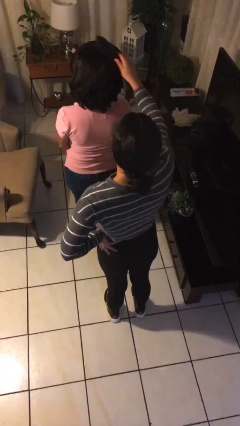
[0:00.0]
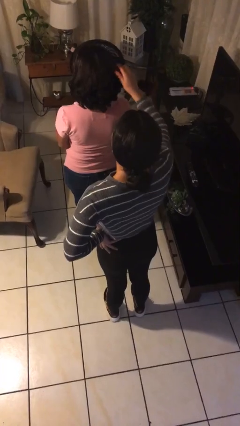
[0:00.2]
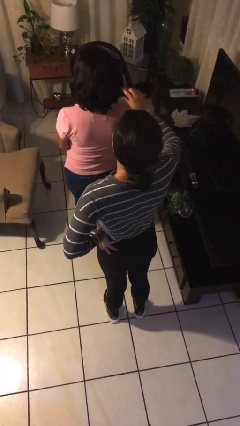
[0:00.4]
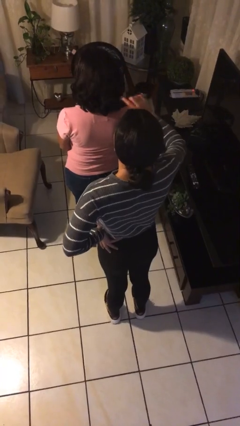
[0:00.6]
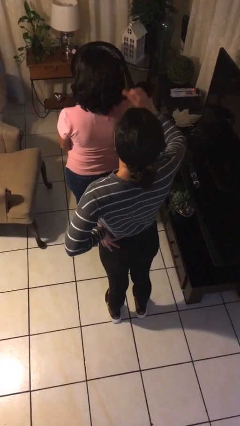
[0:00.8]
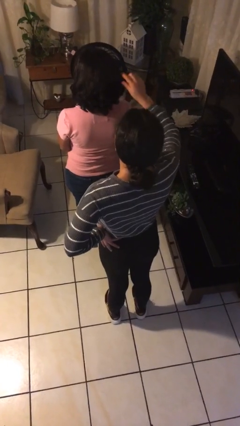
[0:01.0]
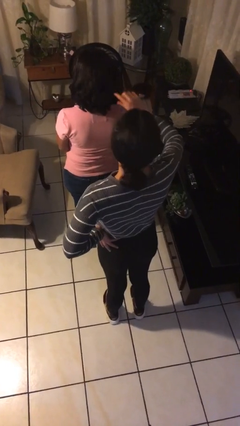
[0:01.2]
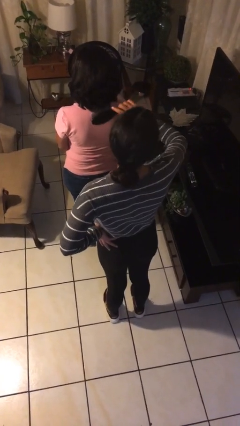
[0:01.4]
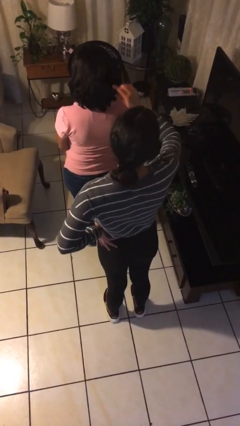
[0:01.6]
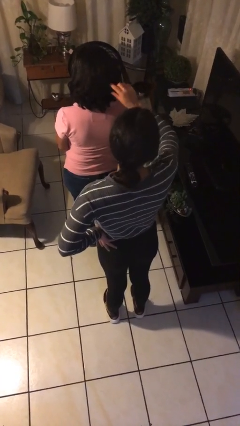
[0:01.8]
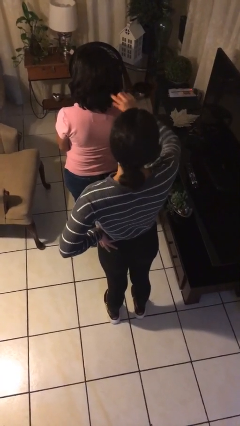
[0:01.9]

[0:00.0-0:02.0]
person brushes hair of person

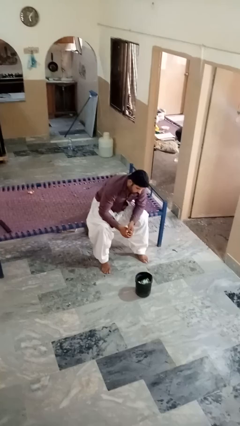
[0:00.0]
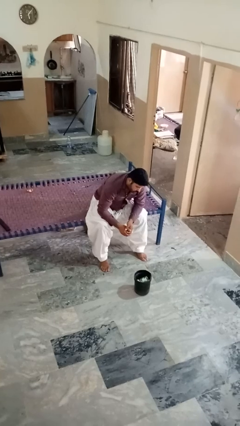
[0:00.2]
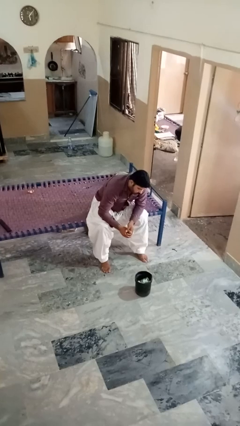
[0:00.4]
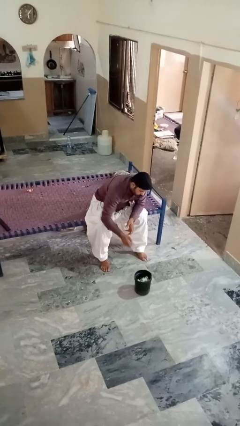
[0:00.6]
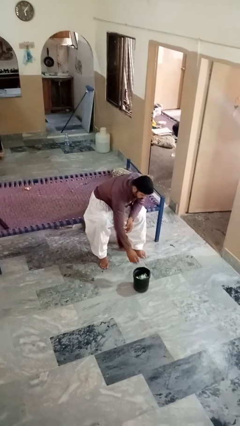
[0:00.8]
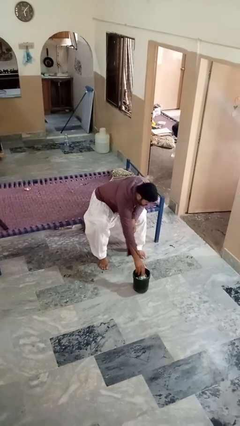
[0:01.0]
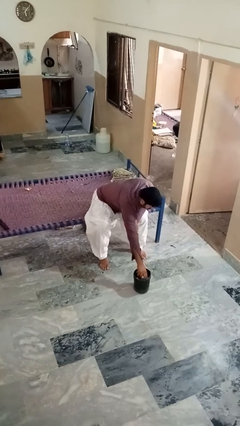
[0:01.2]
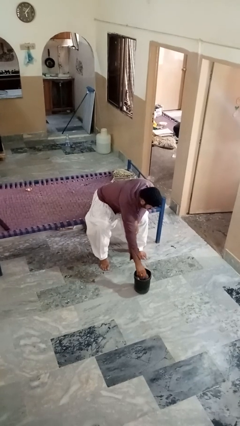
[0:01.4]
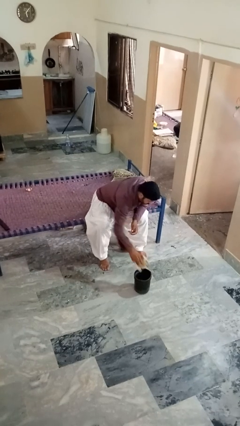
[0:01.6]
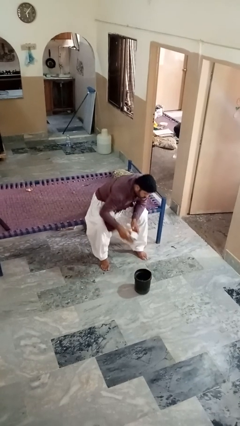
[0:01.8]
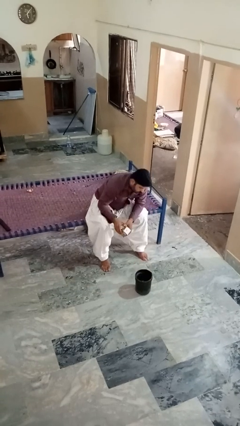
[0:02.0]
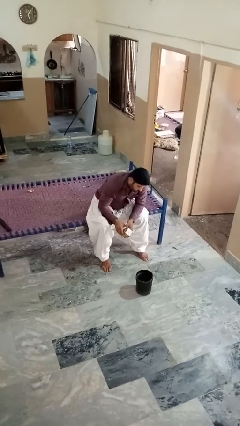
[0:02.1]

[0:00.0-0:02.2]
person takes object from basket

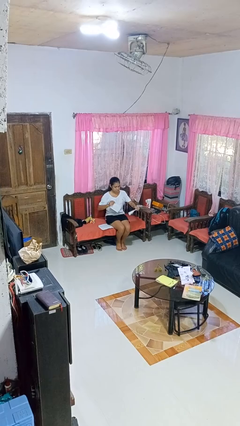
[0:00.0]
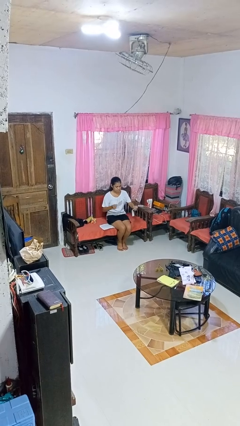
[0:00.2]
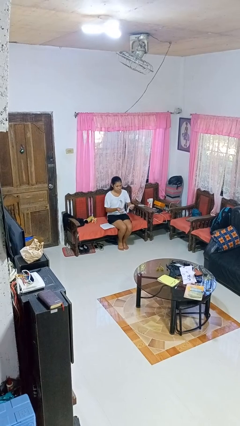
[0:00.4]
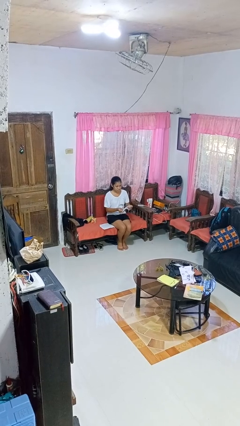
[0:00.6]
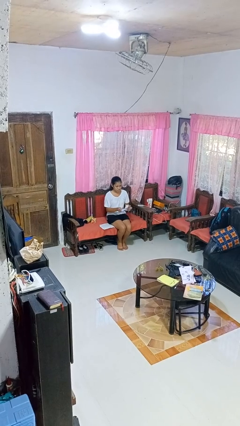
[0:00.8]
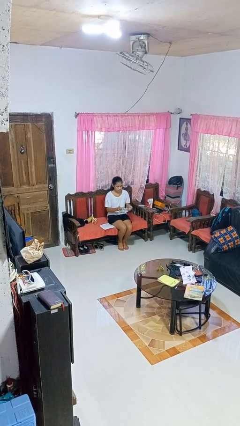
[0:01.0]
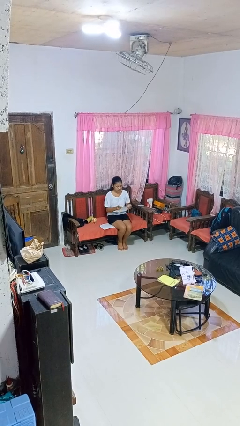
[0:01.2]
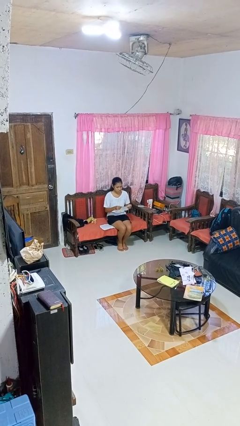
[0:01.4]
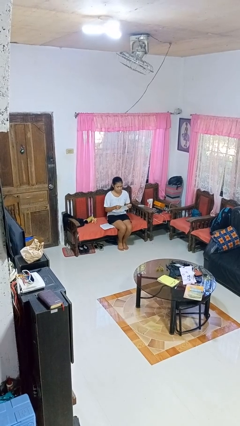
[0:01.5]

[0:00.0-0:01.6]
person tears paper

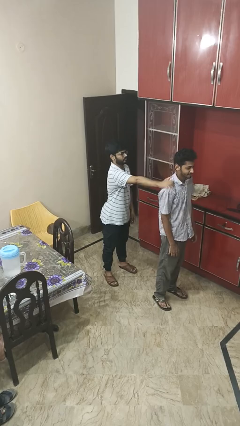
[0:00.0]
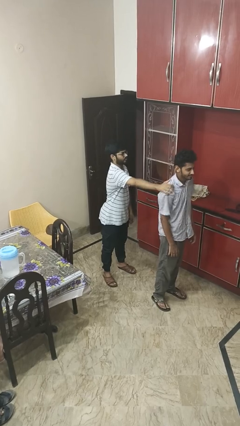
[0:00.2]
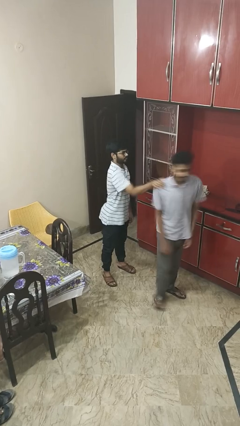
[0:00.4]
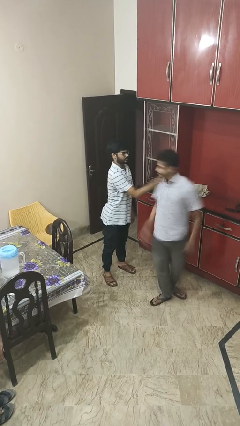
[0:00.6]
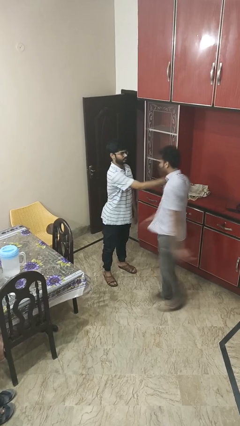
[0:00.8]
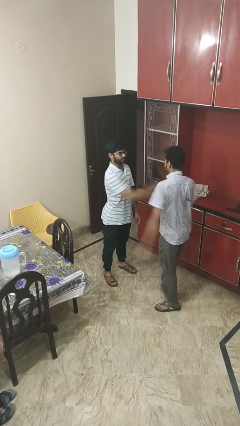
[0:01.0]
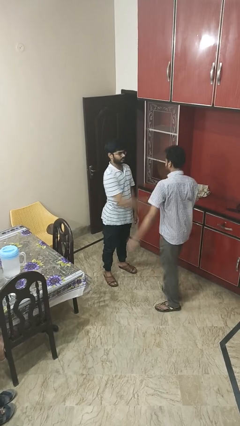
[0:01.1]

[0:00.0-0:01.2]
person spins person around

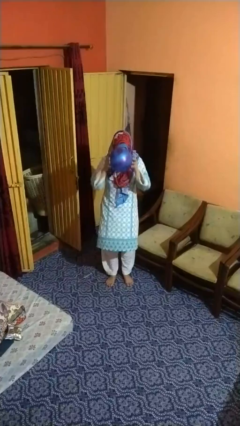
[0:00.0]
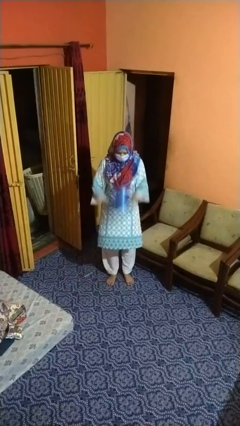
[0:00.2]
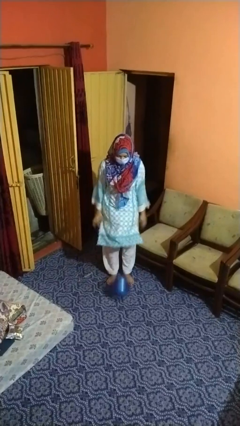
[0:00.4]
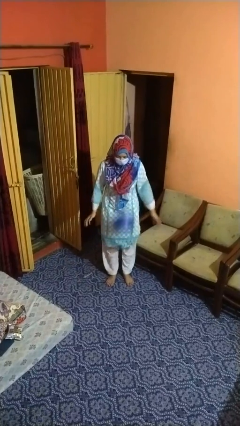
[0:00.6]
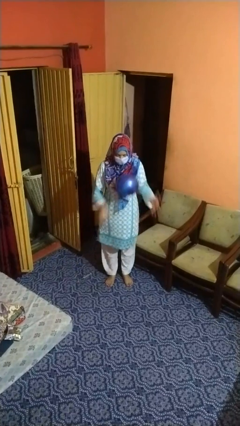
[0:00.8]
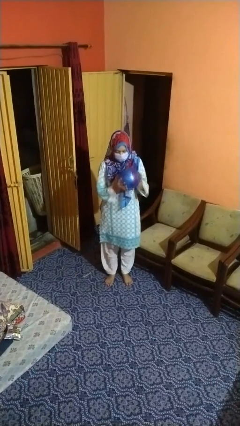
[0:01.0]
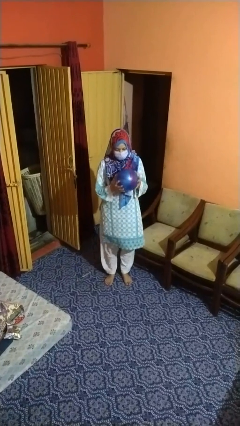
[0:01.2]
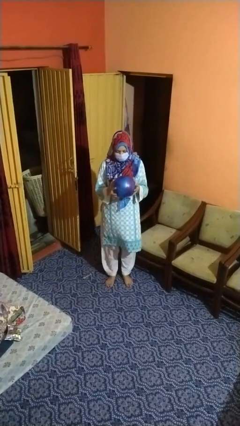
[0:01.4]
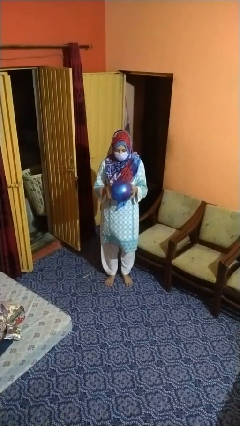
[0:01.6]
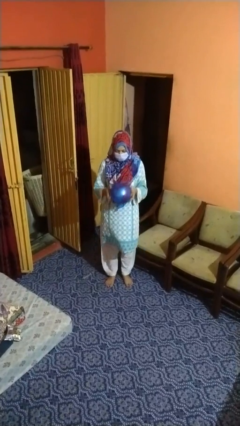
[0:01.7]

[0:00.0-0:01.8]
person bounces ball on floor

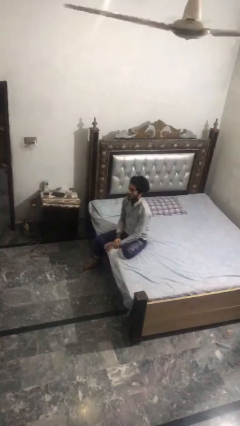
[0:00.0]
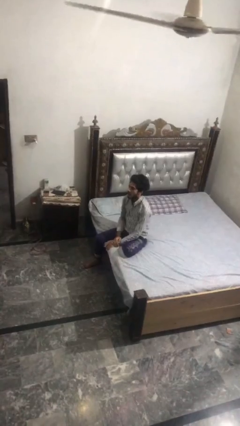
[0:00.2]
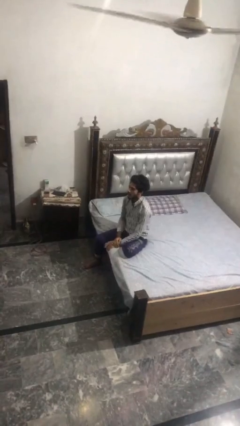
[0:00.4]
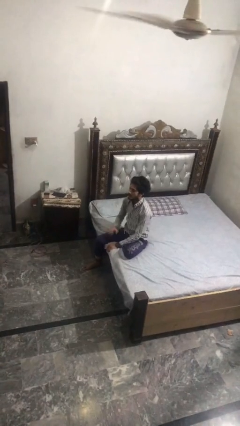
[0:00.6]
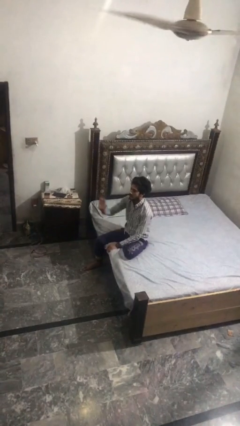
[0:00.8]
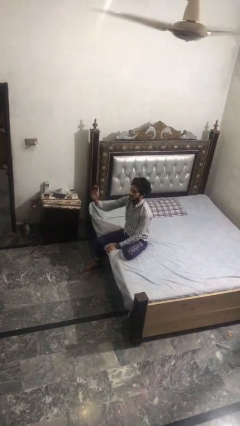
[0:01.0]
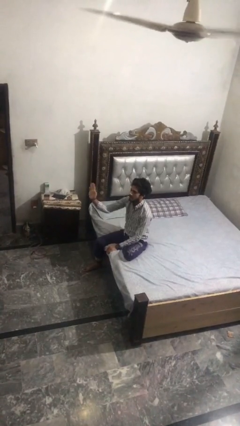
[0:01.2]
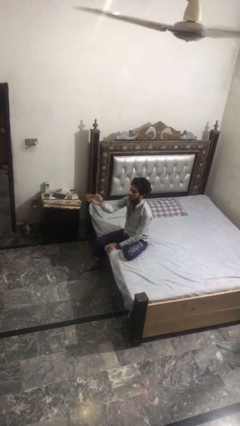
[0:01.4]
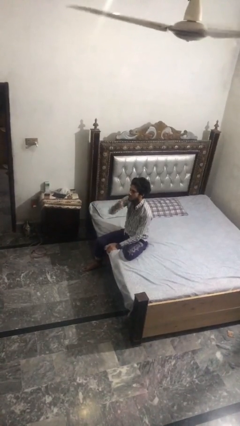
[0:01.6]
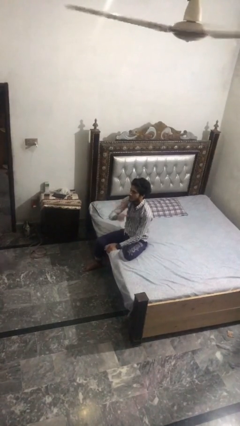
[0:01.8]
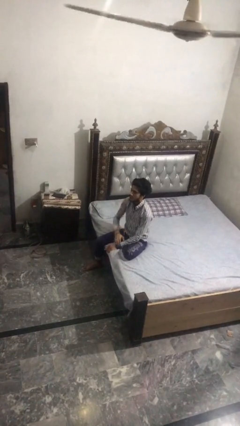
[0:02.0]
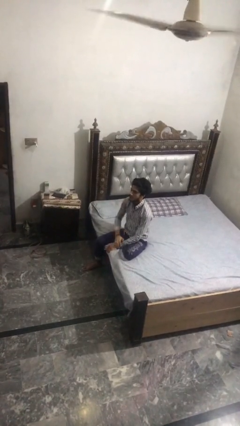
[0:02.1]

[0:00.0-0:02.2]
person gestures swipe left

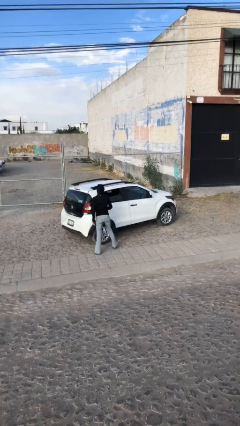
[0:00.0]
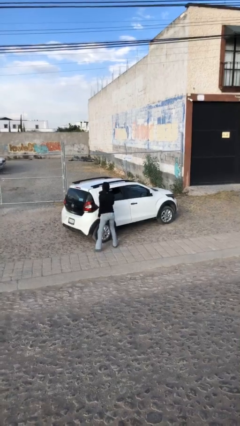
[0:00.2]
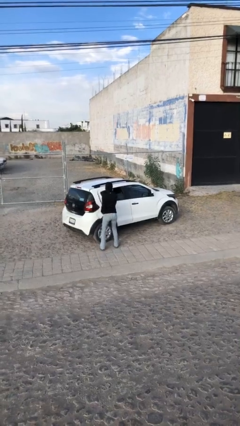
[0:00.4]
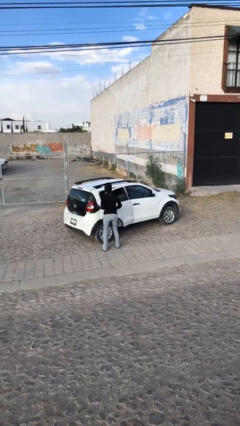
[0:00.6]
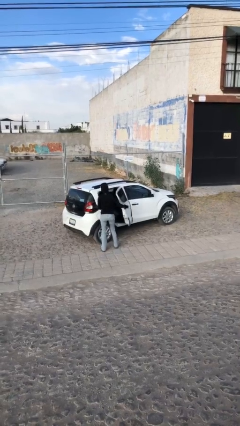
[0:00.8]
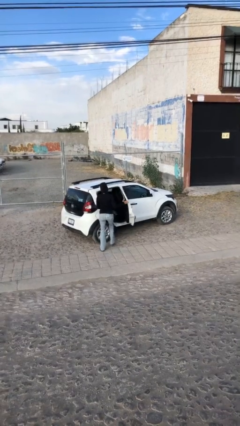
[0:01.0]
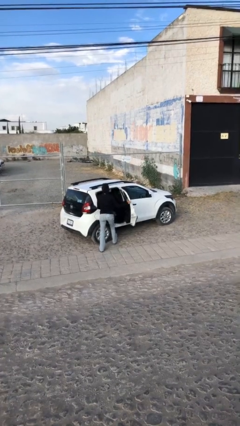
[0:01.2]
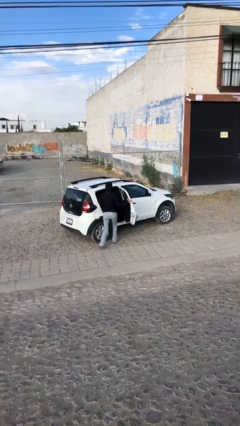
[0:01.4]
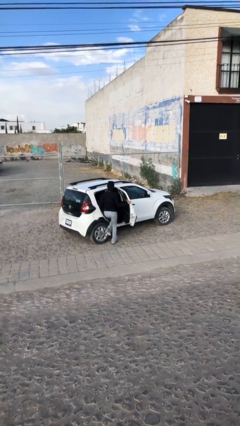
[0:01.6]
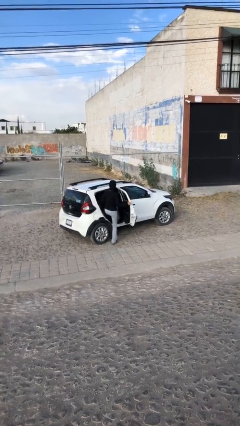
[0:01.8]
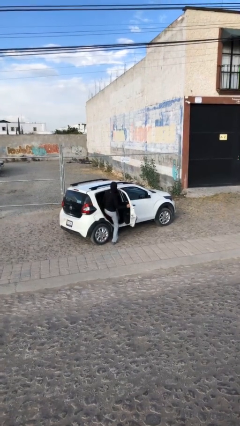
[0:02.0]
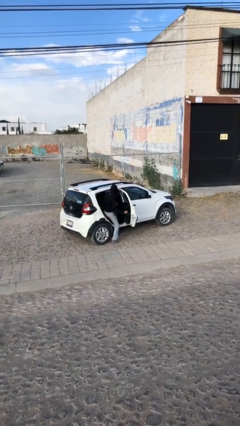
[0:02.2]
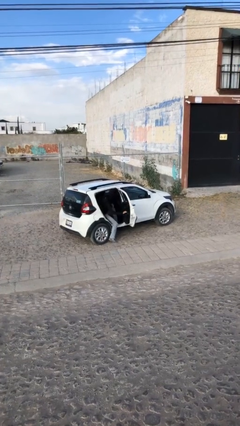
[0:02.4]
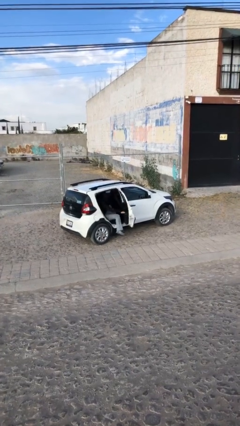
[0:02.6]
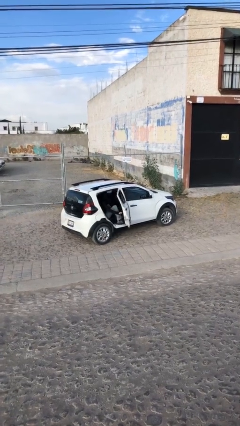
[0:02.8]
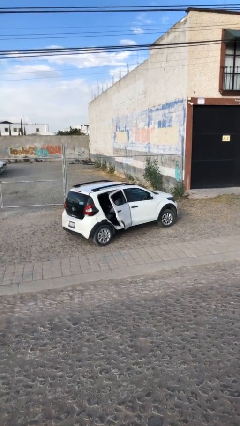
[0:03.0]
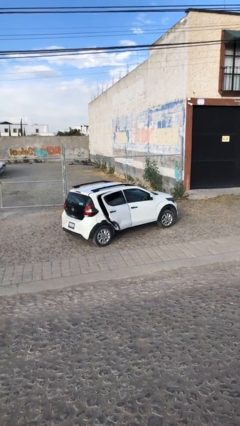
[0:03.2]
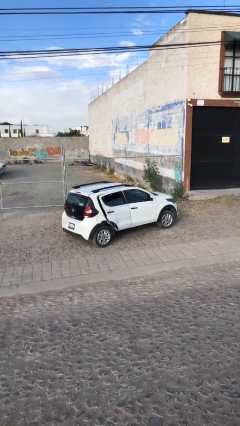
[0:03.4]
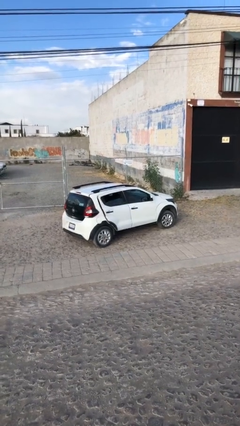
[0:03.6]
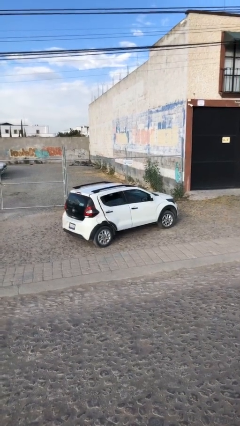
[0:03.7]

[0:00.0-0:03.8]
car picks up person

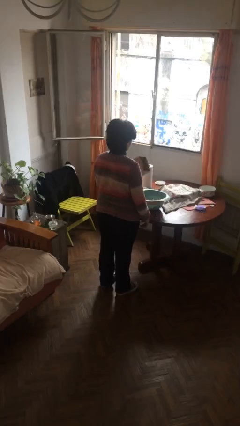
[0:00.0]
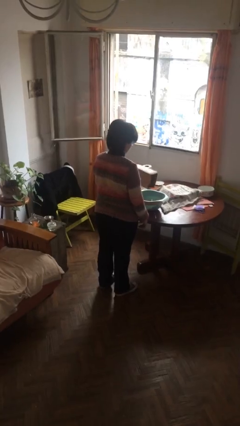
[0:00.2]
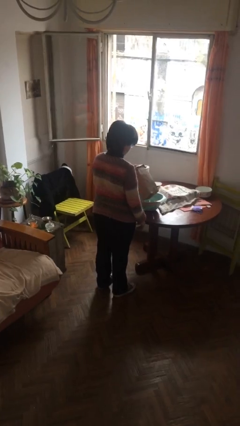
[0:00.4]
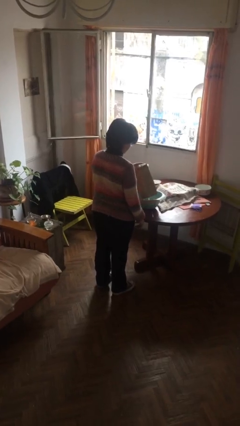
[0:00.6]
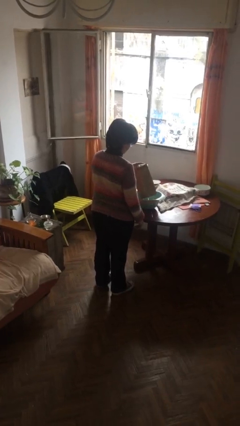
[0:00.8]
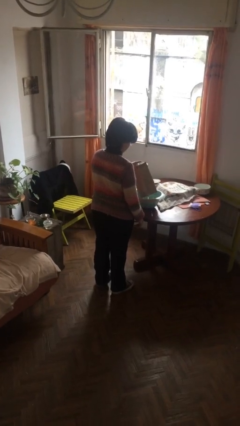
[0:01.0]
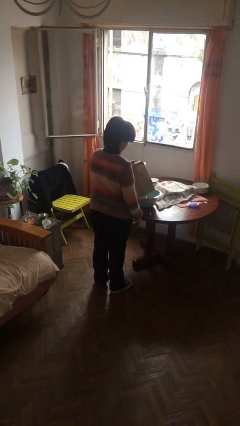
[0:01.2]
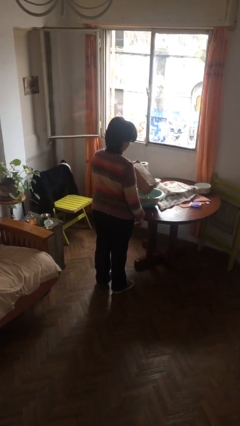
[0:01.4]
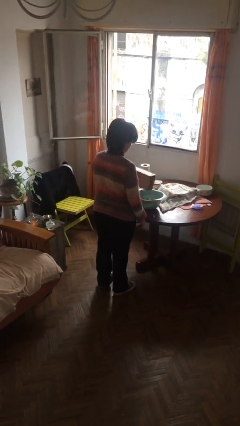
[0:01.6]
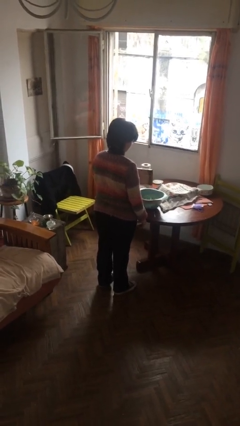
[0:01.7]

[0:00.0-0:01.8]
person pours into bowl

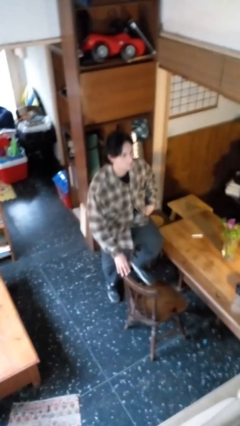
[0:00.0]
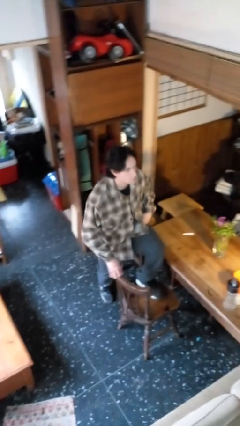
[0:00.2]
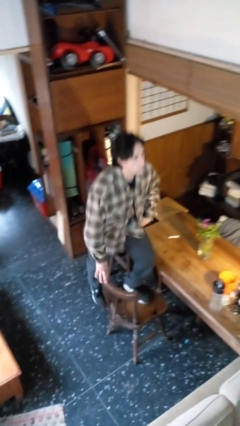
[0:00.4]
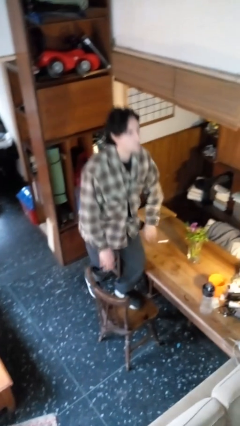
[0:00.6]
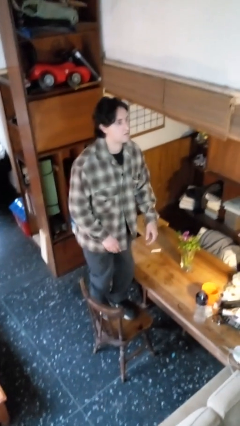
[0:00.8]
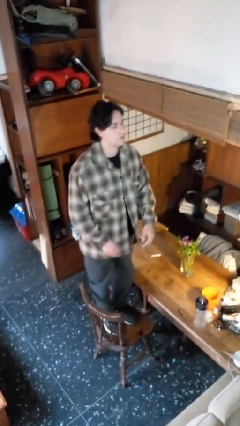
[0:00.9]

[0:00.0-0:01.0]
person climbs on chair
